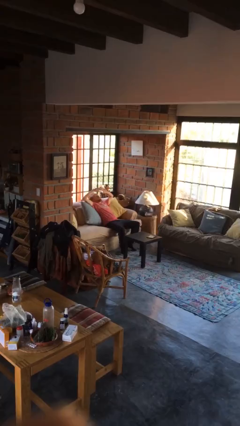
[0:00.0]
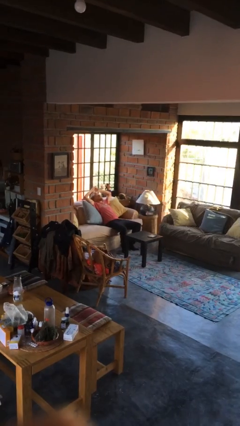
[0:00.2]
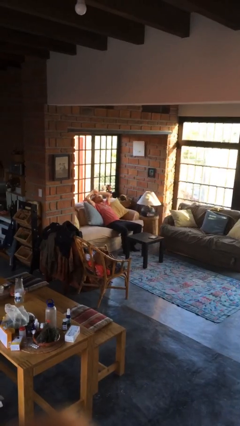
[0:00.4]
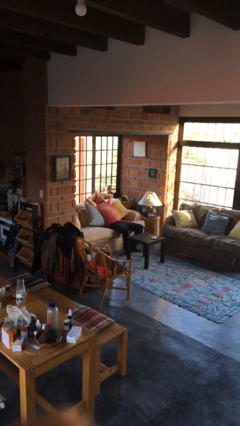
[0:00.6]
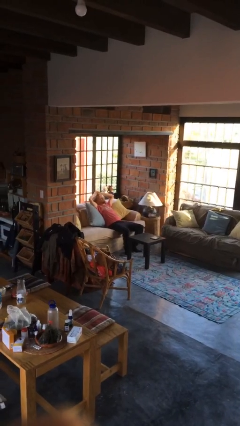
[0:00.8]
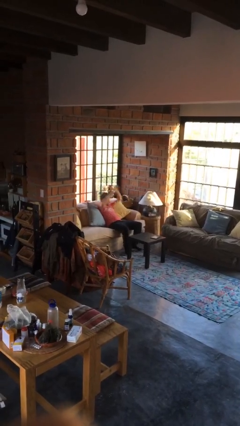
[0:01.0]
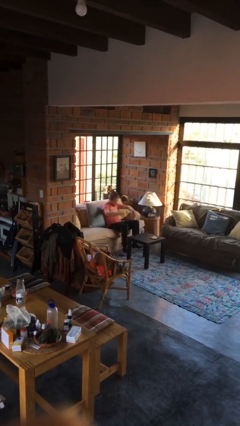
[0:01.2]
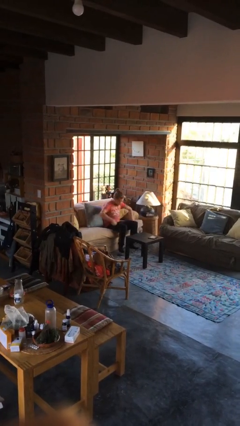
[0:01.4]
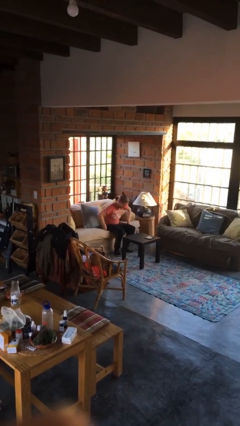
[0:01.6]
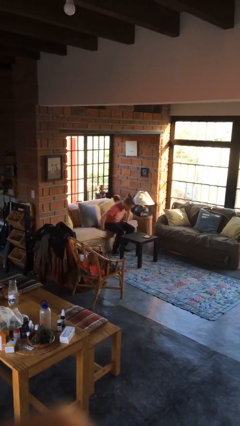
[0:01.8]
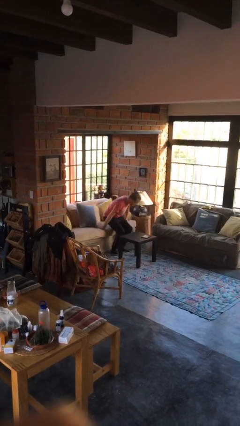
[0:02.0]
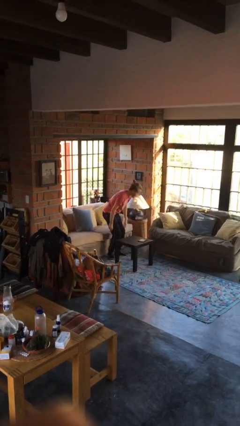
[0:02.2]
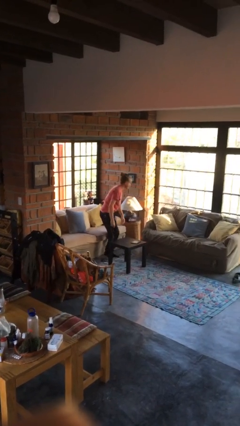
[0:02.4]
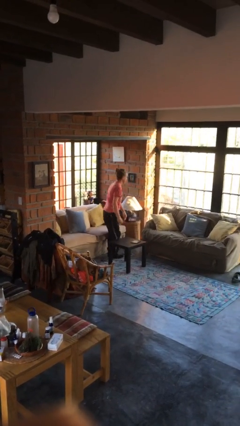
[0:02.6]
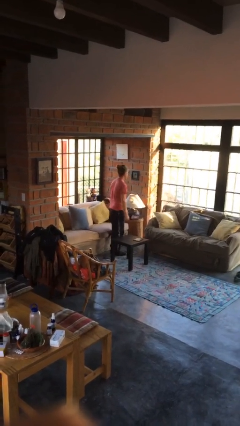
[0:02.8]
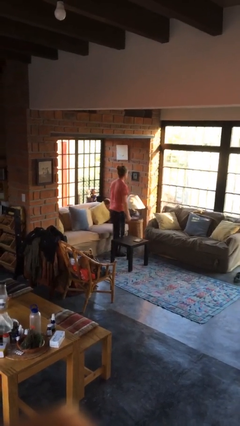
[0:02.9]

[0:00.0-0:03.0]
person stands up

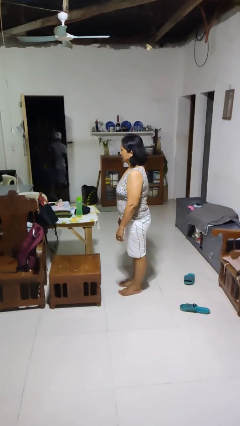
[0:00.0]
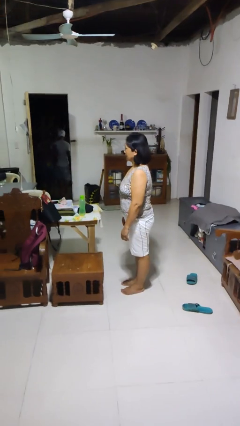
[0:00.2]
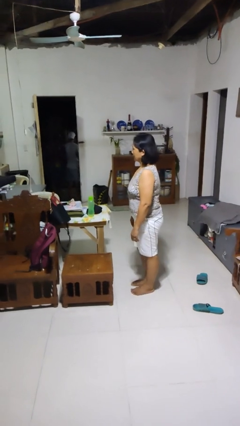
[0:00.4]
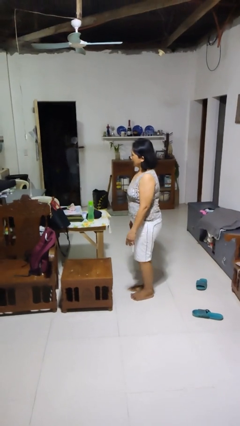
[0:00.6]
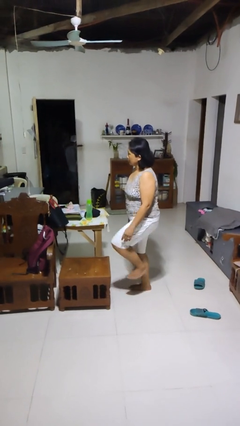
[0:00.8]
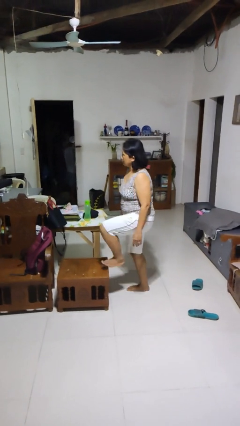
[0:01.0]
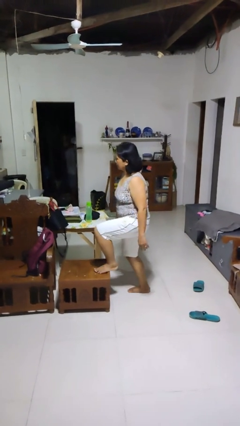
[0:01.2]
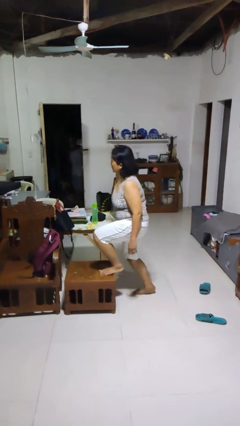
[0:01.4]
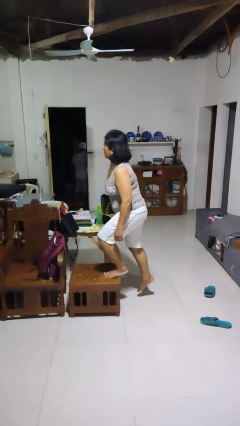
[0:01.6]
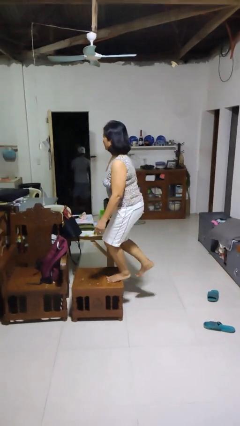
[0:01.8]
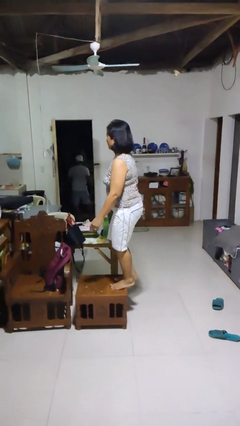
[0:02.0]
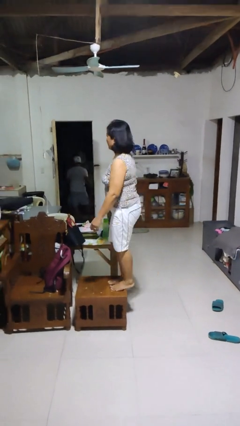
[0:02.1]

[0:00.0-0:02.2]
person climbs on chair

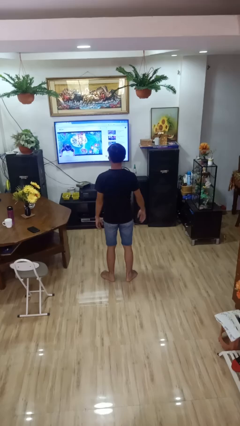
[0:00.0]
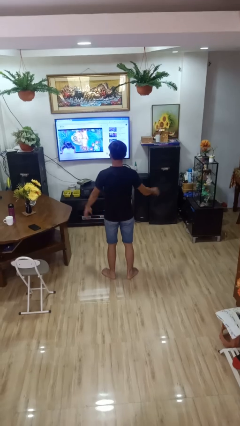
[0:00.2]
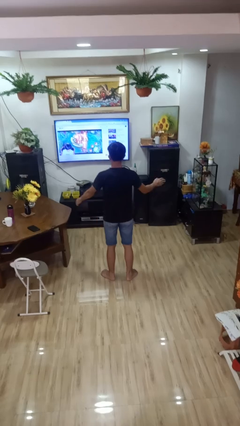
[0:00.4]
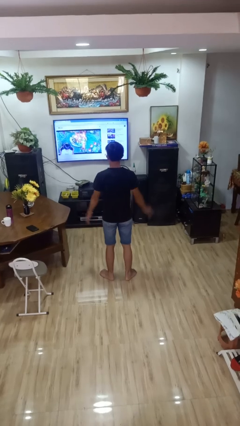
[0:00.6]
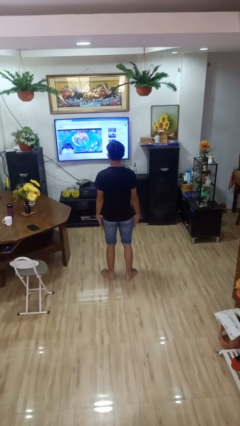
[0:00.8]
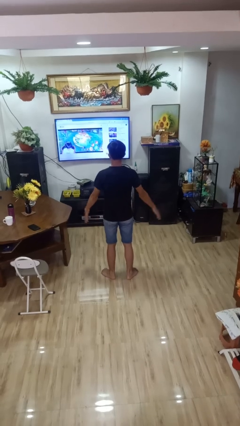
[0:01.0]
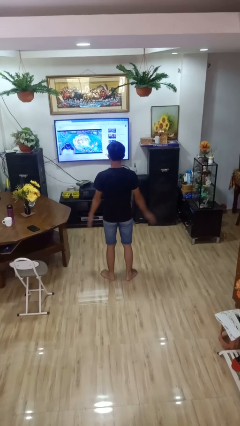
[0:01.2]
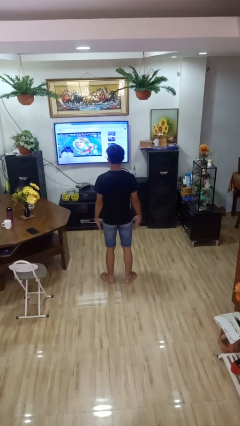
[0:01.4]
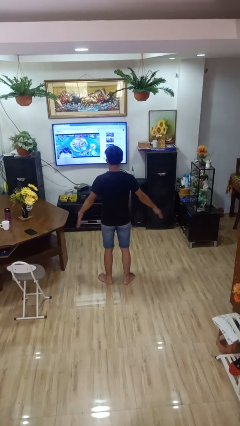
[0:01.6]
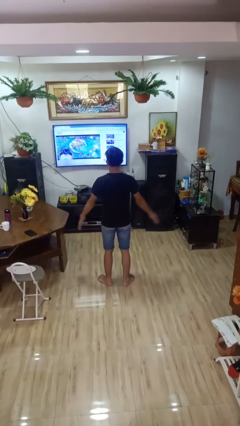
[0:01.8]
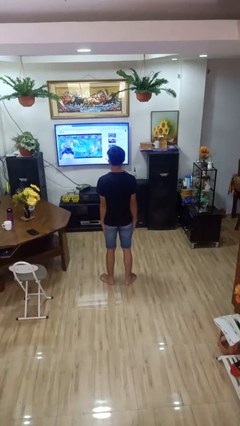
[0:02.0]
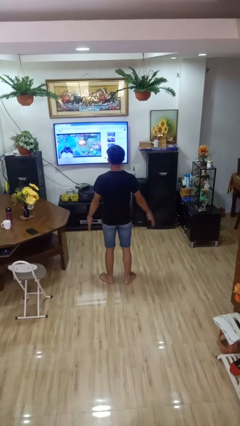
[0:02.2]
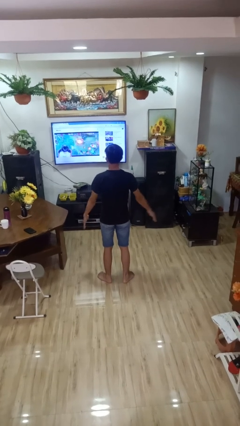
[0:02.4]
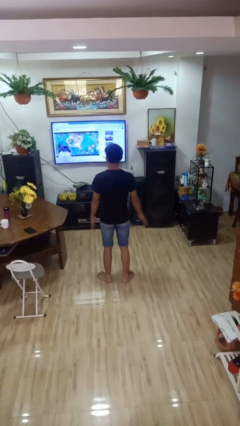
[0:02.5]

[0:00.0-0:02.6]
person slaps hands on thighs

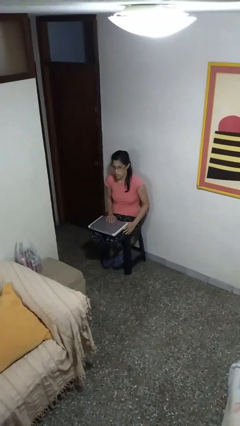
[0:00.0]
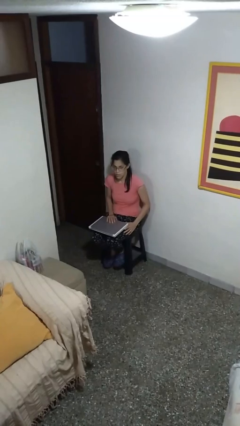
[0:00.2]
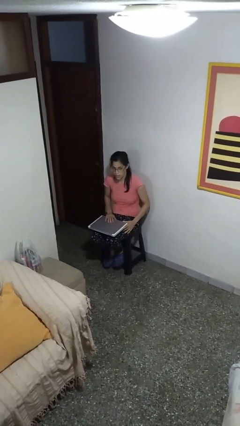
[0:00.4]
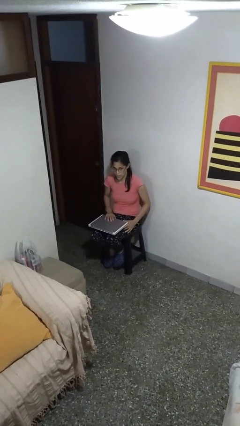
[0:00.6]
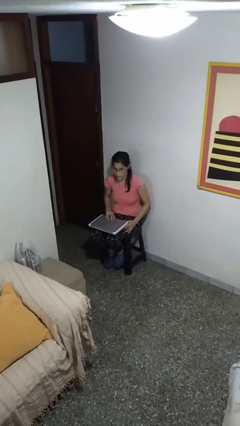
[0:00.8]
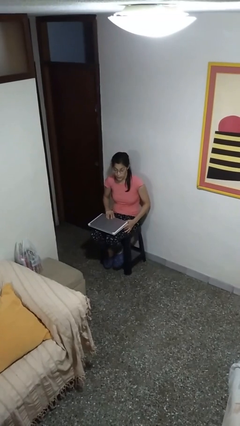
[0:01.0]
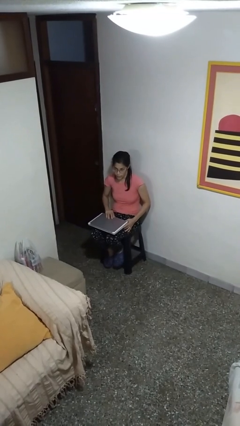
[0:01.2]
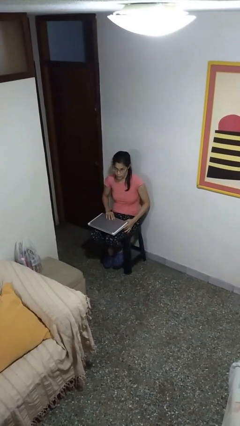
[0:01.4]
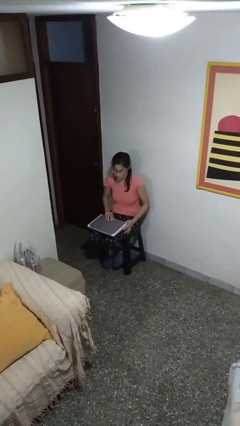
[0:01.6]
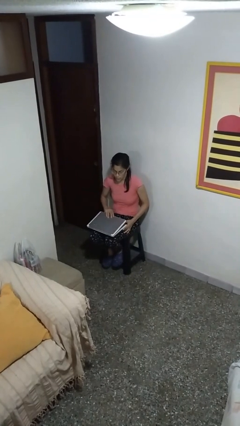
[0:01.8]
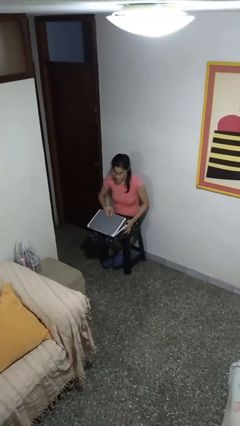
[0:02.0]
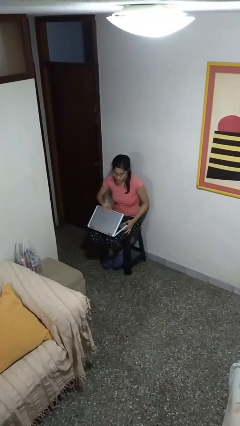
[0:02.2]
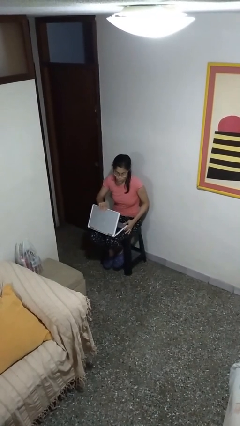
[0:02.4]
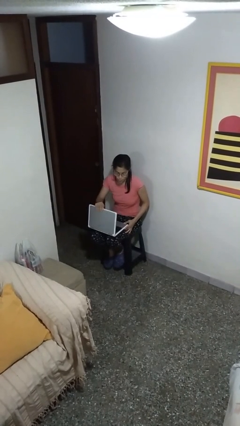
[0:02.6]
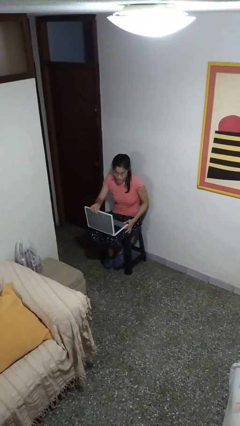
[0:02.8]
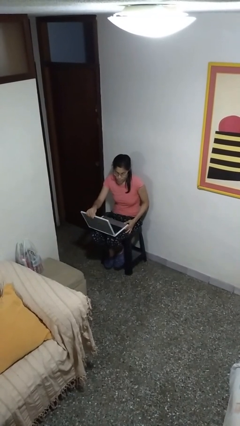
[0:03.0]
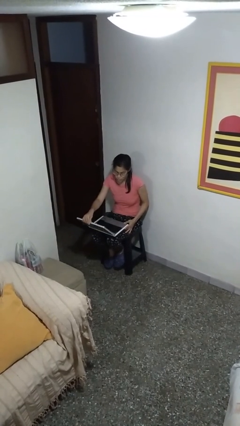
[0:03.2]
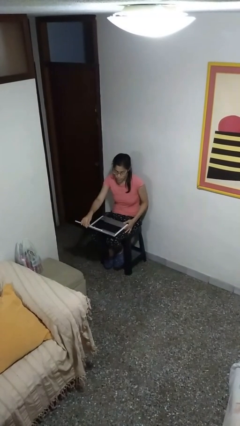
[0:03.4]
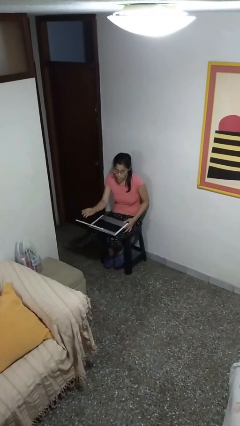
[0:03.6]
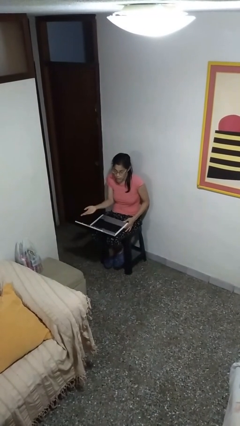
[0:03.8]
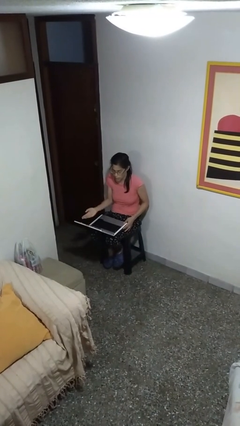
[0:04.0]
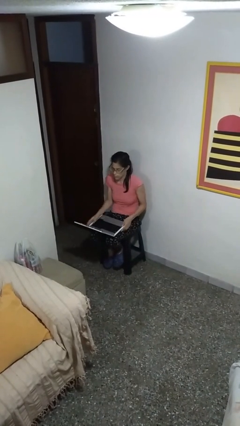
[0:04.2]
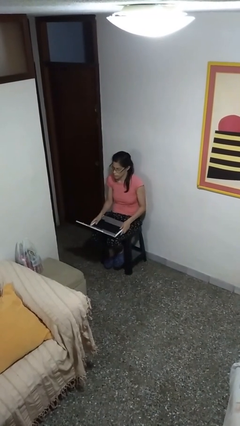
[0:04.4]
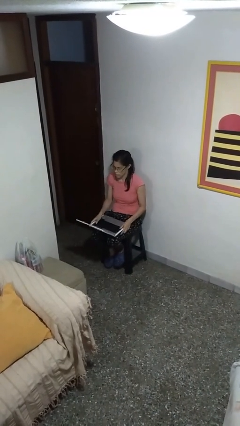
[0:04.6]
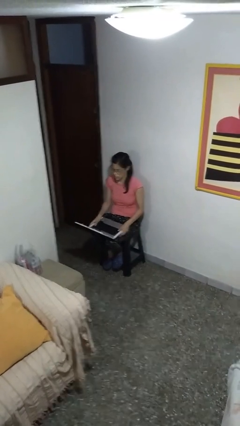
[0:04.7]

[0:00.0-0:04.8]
person opens laptop

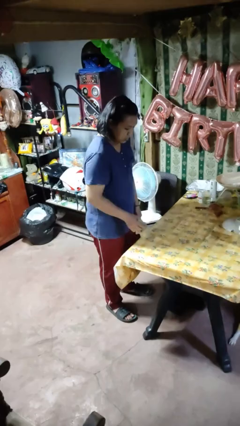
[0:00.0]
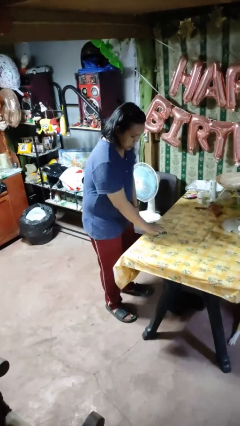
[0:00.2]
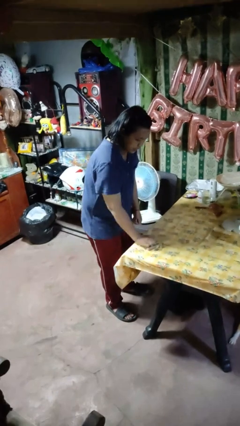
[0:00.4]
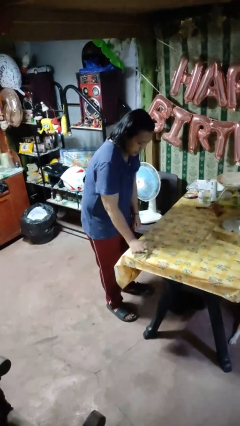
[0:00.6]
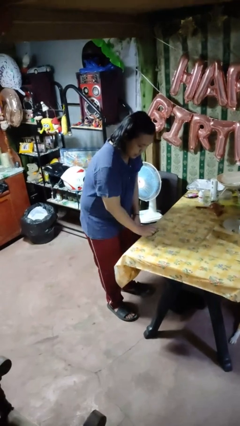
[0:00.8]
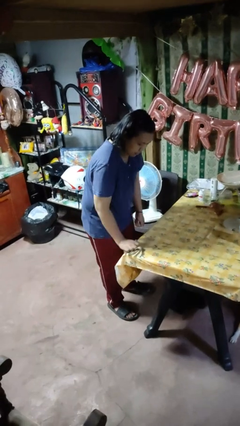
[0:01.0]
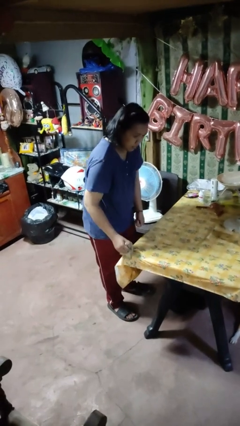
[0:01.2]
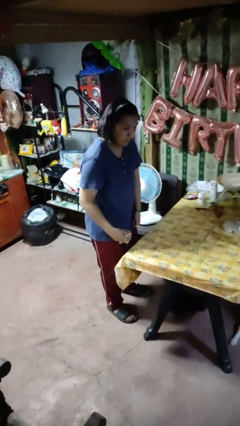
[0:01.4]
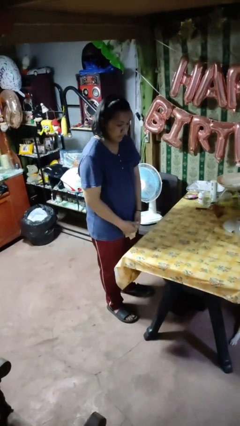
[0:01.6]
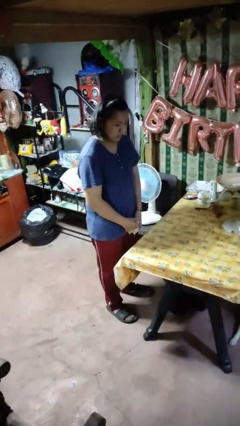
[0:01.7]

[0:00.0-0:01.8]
person cleans table with rag

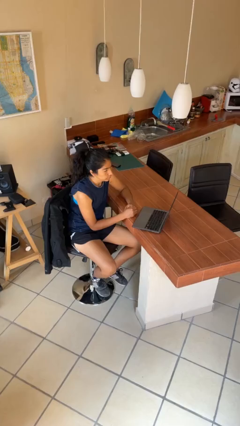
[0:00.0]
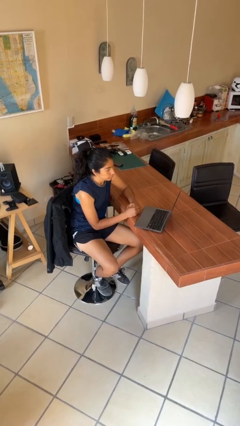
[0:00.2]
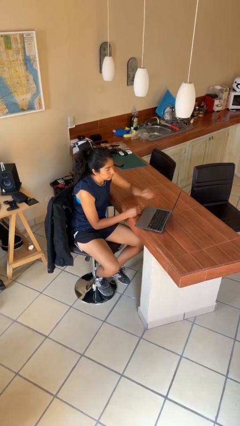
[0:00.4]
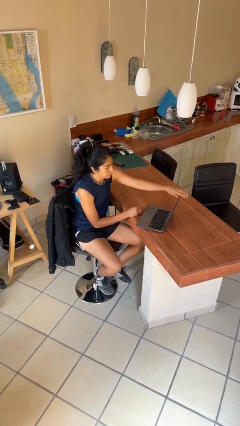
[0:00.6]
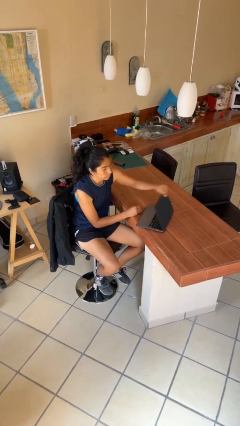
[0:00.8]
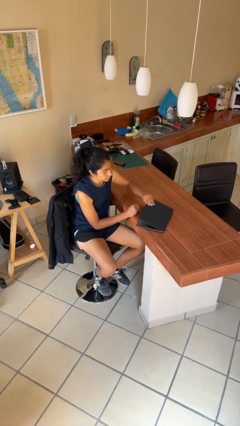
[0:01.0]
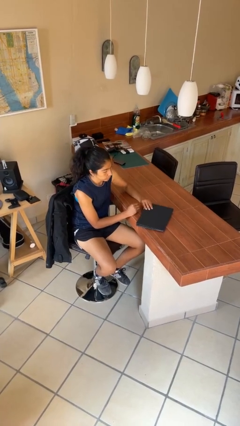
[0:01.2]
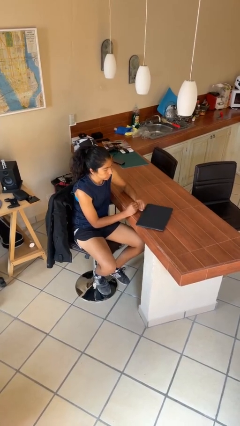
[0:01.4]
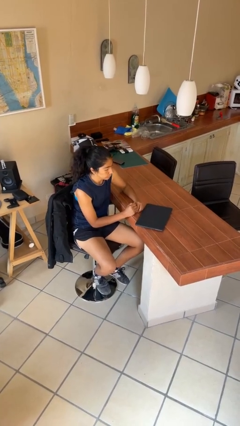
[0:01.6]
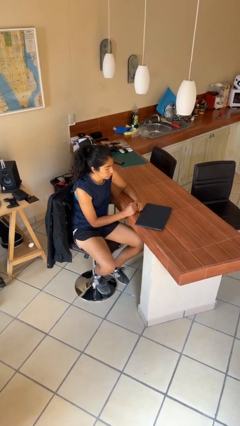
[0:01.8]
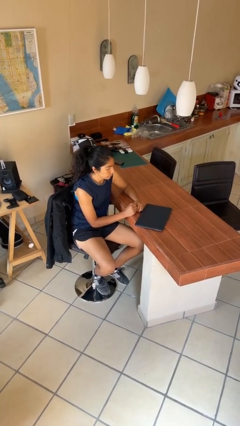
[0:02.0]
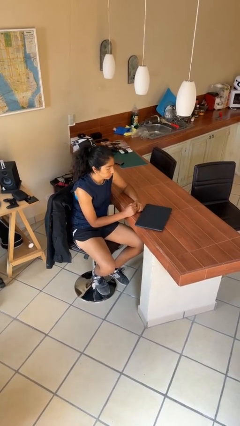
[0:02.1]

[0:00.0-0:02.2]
person closes laptop

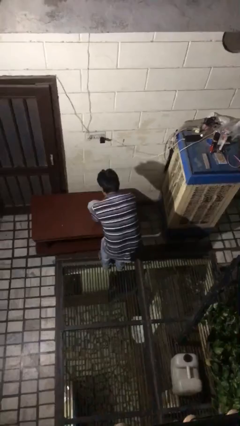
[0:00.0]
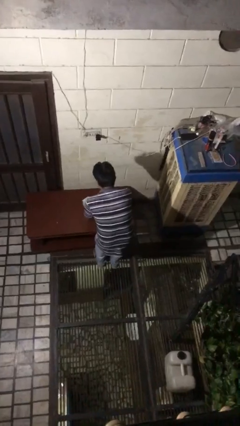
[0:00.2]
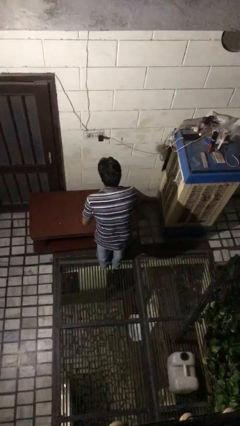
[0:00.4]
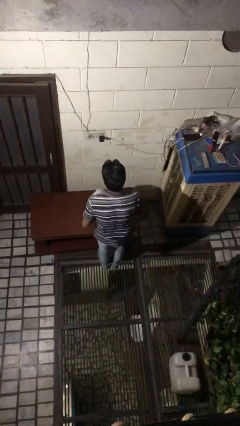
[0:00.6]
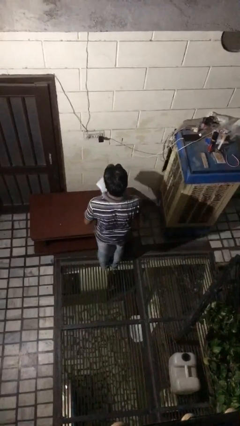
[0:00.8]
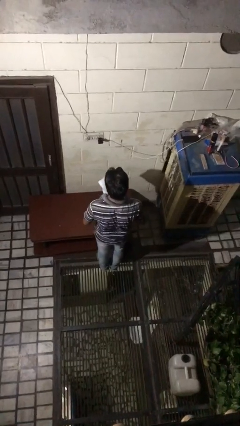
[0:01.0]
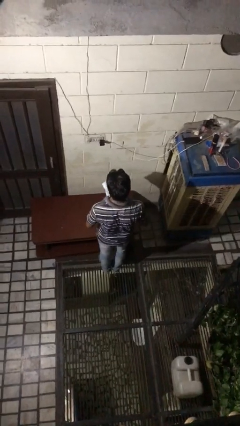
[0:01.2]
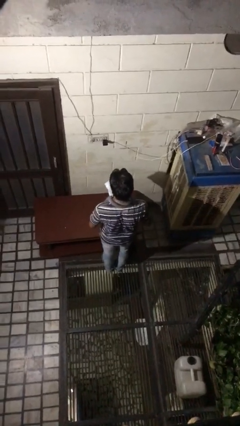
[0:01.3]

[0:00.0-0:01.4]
person picks up object from table
